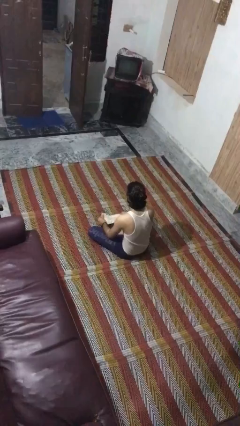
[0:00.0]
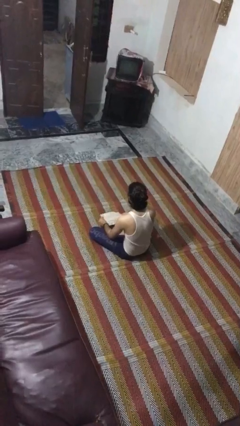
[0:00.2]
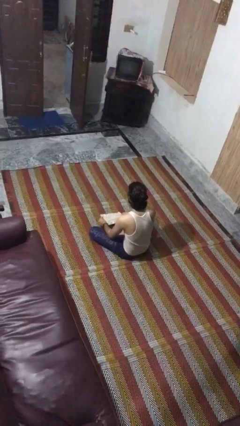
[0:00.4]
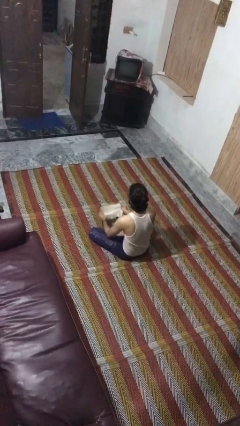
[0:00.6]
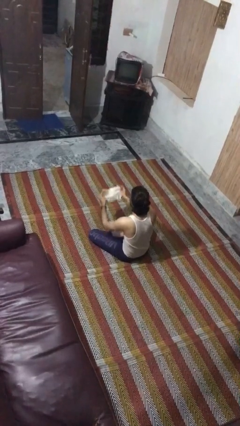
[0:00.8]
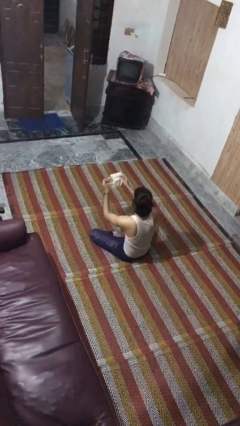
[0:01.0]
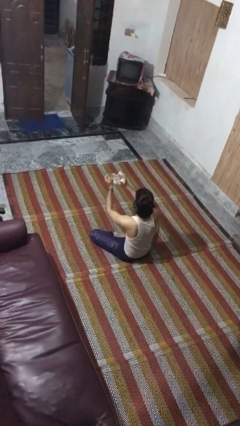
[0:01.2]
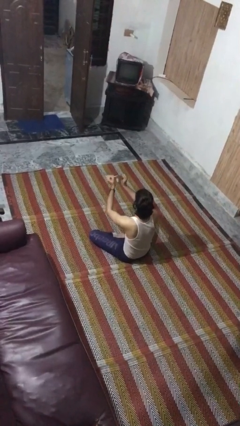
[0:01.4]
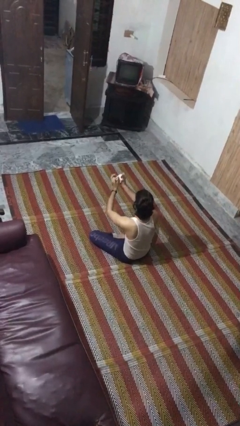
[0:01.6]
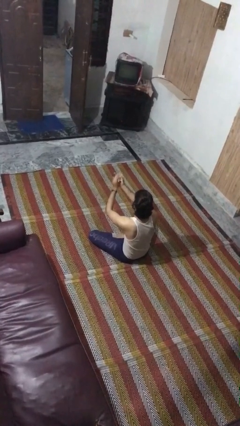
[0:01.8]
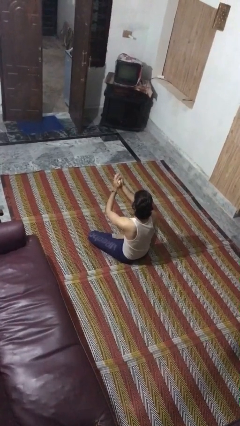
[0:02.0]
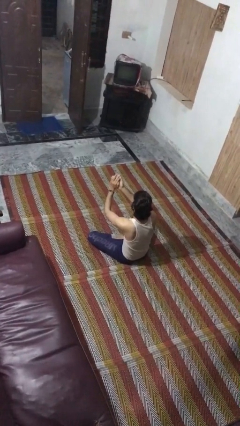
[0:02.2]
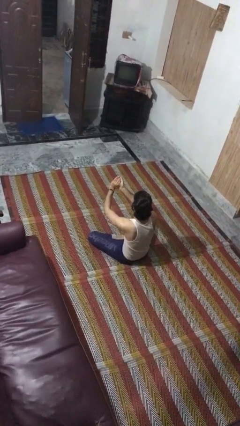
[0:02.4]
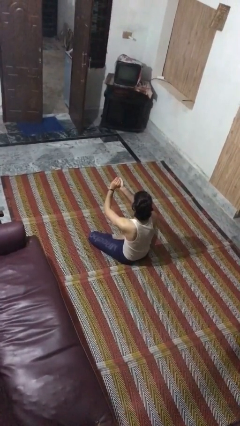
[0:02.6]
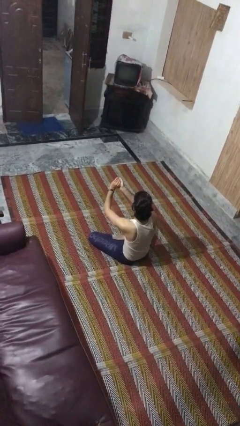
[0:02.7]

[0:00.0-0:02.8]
person crumples paper

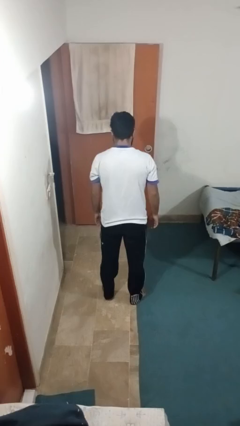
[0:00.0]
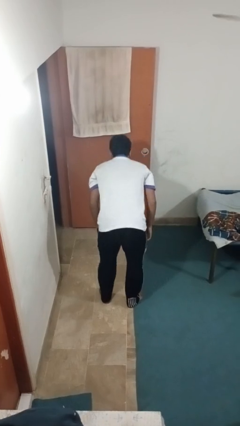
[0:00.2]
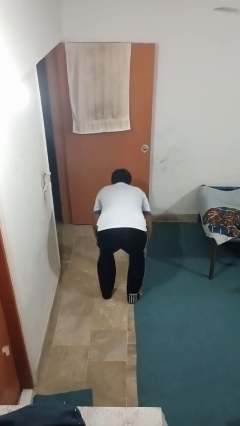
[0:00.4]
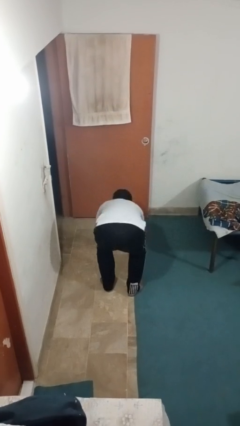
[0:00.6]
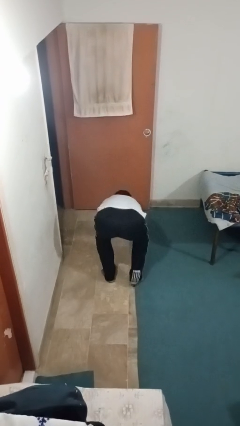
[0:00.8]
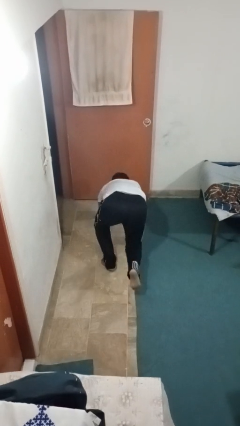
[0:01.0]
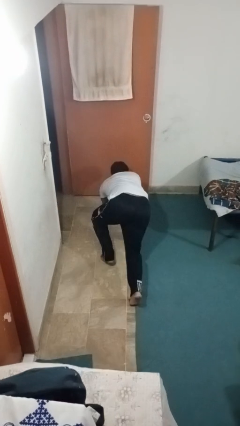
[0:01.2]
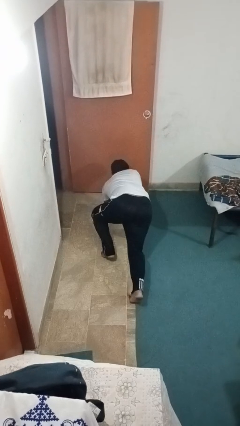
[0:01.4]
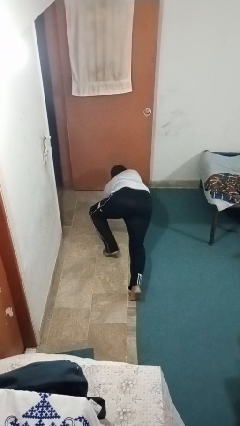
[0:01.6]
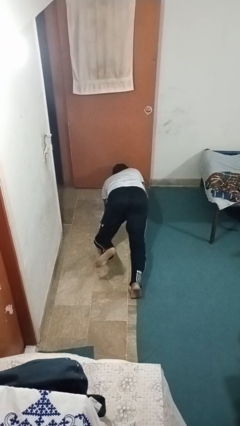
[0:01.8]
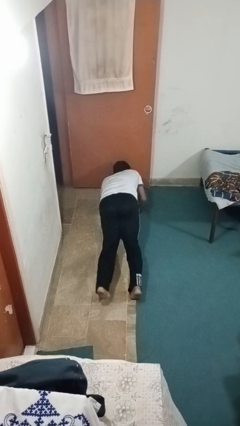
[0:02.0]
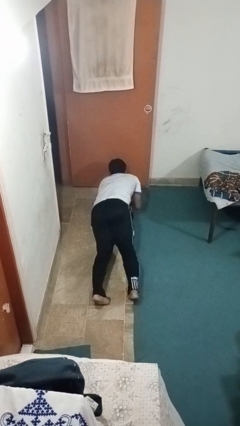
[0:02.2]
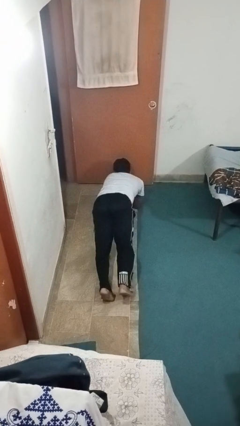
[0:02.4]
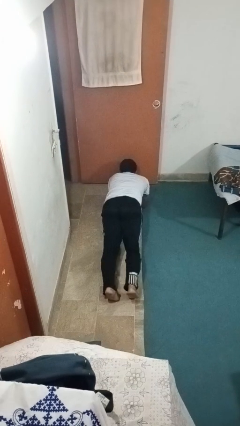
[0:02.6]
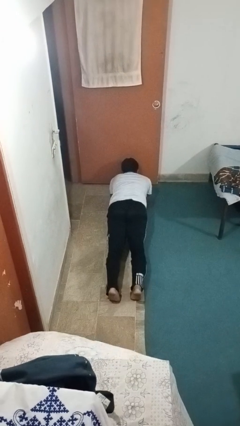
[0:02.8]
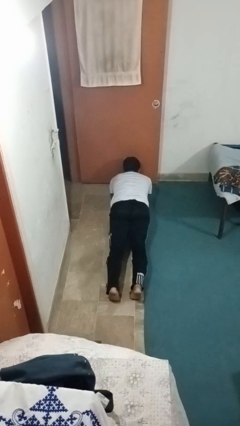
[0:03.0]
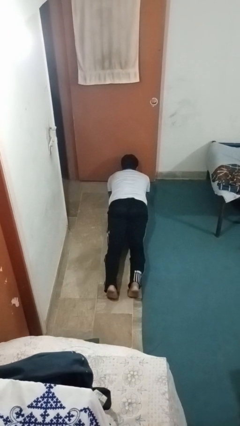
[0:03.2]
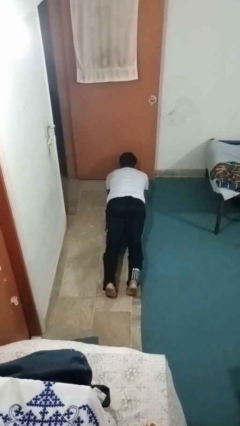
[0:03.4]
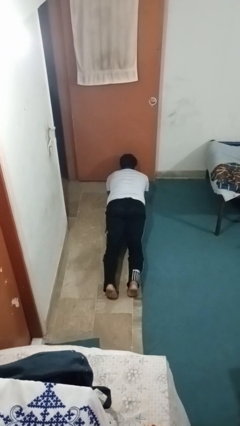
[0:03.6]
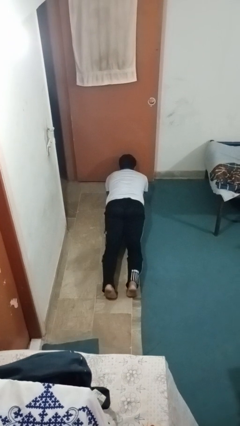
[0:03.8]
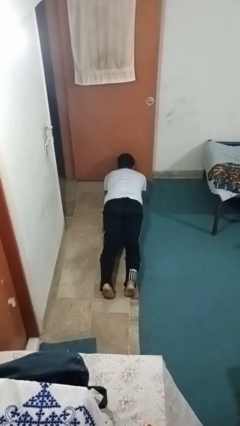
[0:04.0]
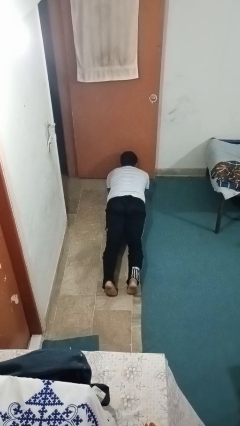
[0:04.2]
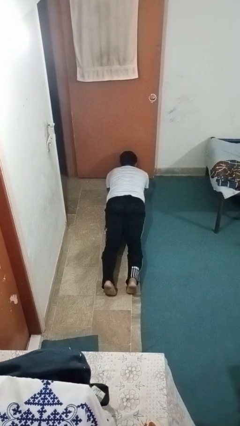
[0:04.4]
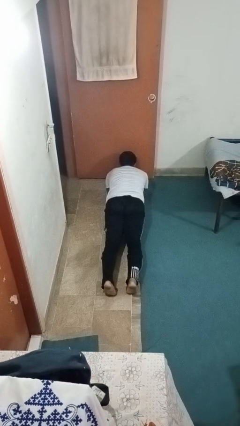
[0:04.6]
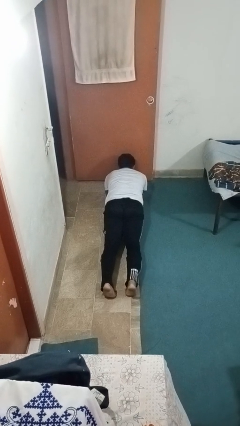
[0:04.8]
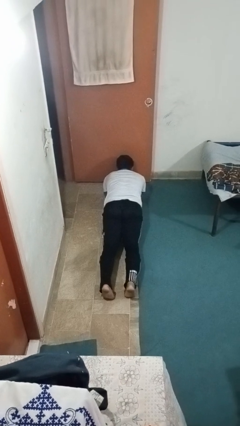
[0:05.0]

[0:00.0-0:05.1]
person exercises with plank

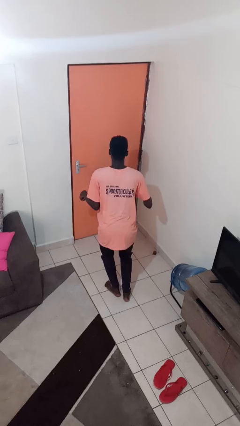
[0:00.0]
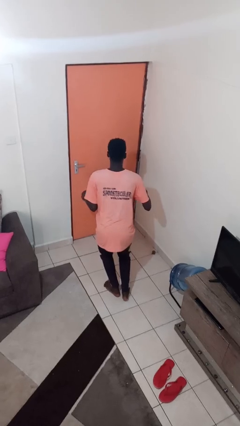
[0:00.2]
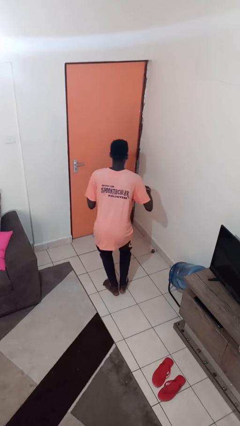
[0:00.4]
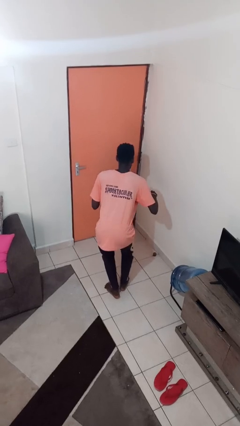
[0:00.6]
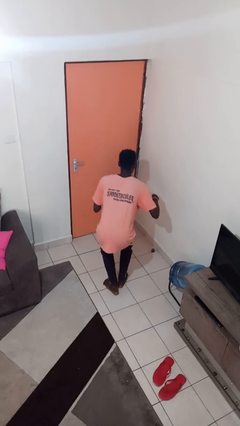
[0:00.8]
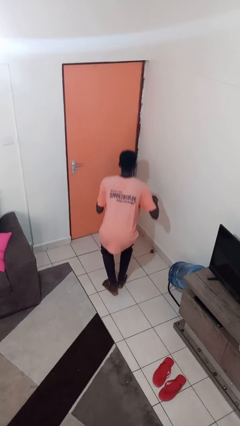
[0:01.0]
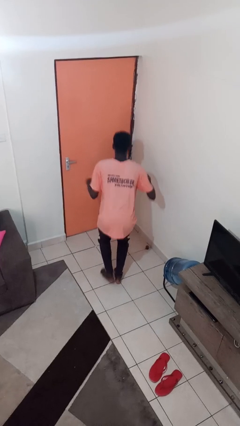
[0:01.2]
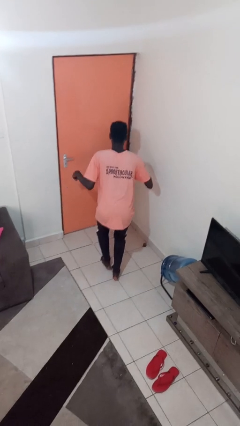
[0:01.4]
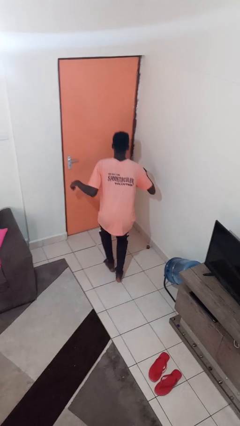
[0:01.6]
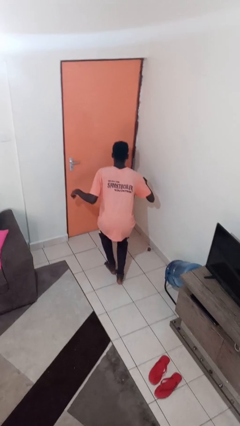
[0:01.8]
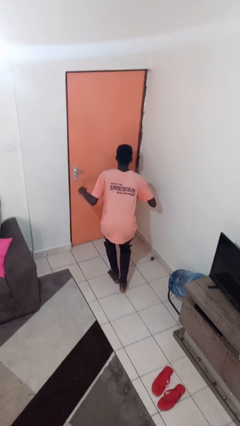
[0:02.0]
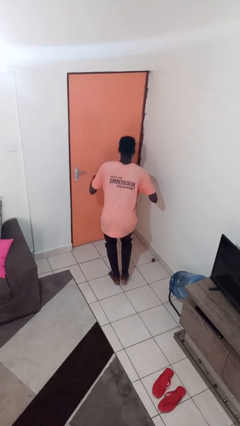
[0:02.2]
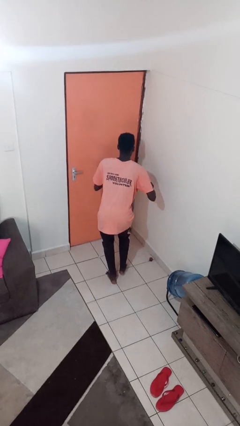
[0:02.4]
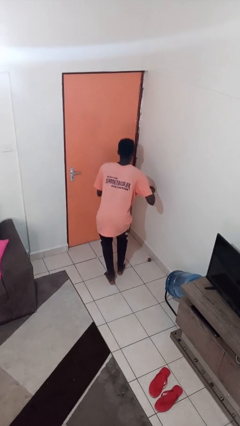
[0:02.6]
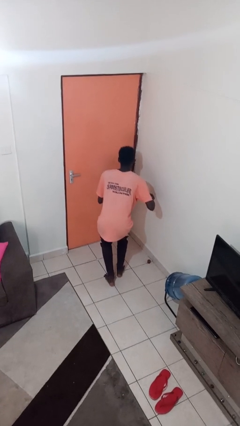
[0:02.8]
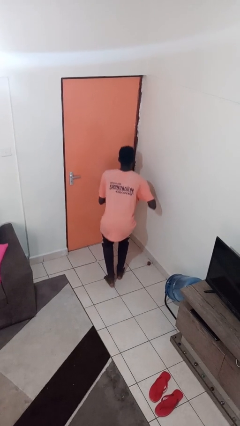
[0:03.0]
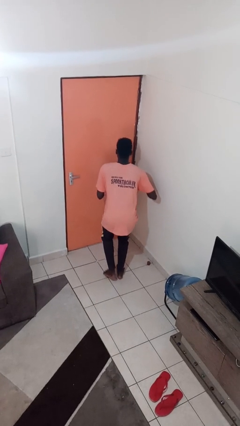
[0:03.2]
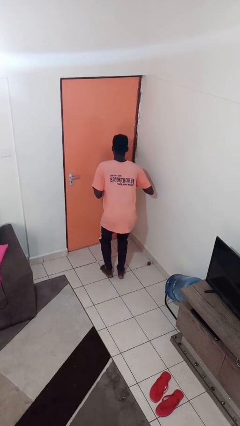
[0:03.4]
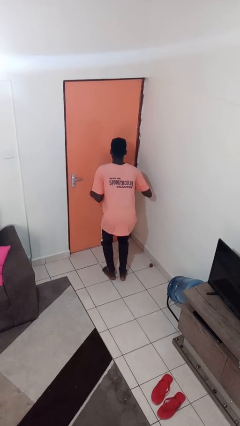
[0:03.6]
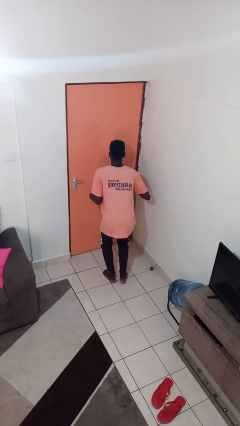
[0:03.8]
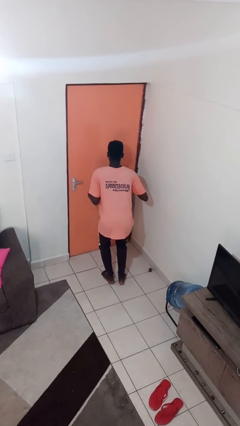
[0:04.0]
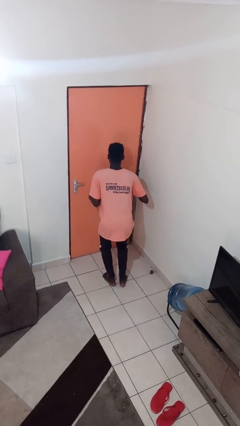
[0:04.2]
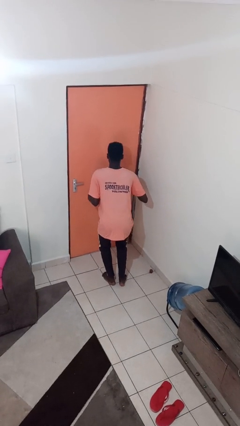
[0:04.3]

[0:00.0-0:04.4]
person walks tiptoe

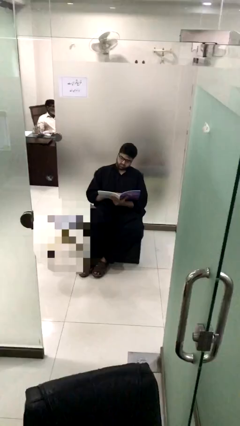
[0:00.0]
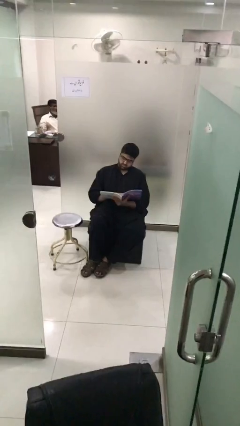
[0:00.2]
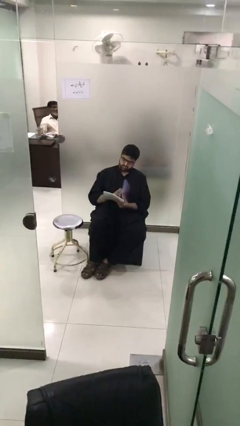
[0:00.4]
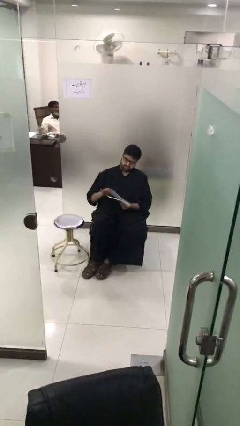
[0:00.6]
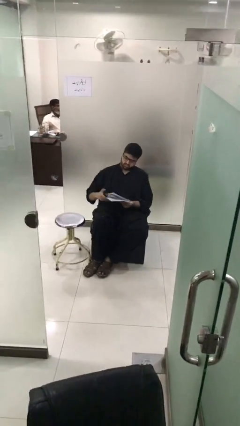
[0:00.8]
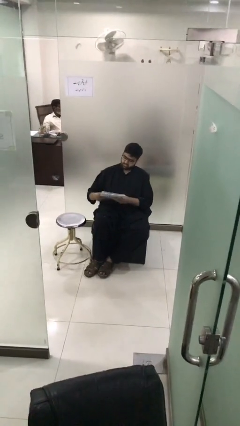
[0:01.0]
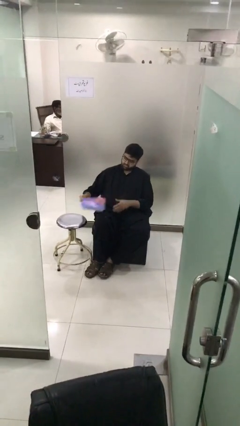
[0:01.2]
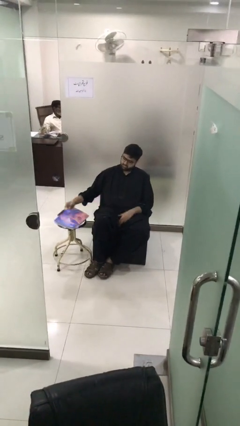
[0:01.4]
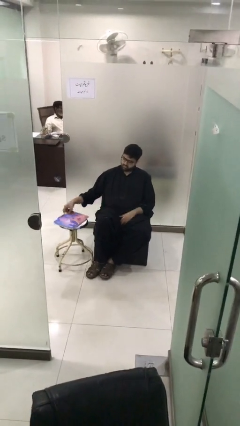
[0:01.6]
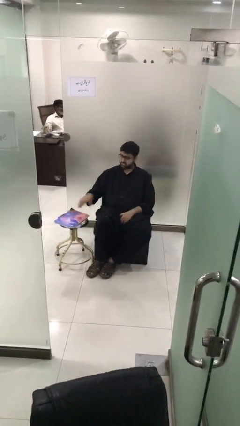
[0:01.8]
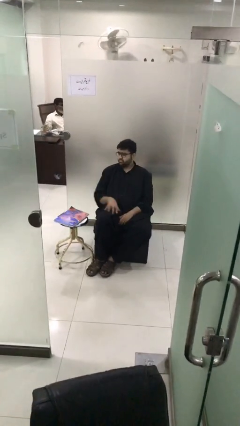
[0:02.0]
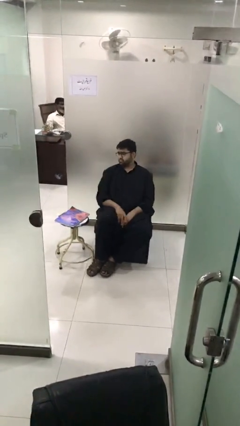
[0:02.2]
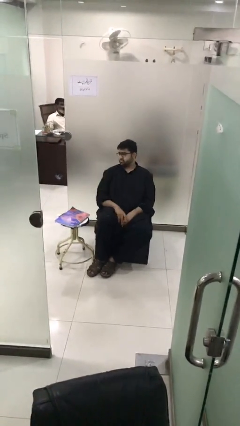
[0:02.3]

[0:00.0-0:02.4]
person puts down object on table

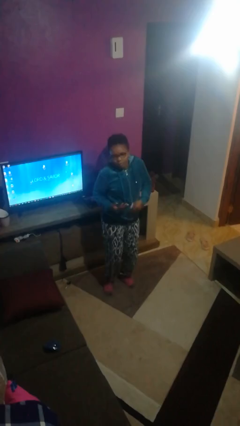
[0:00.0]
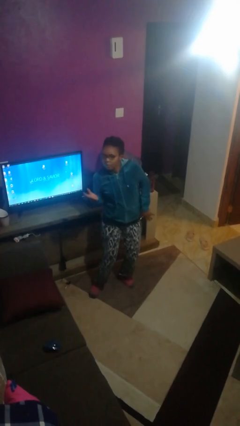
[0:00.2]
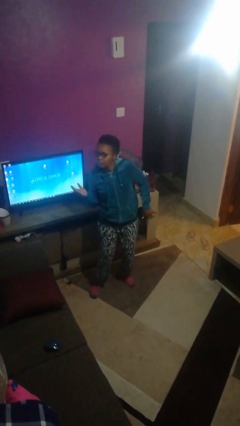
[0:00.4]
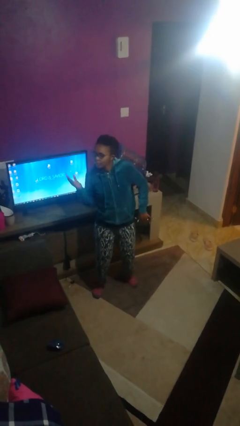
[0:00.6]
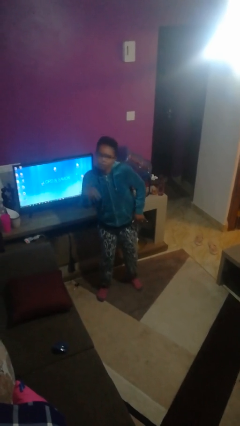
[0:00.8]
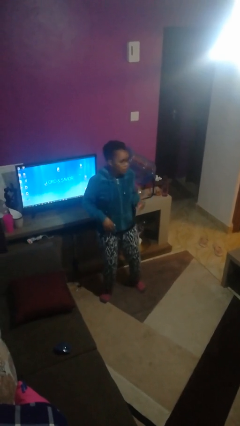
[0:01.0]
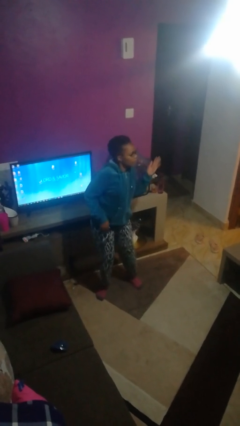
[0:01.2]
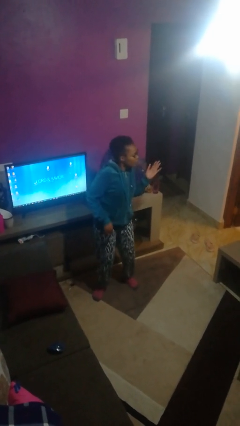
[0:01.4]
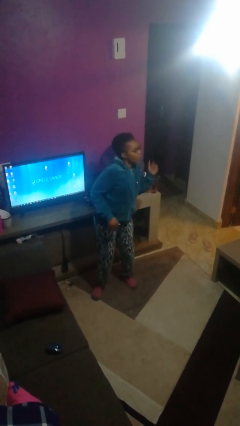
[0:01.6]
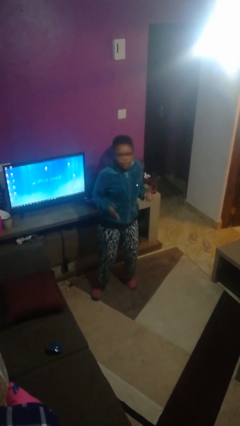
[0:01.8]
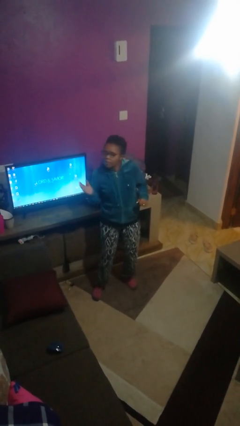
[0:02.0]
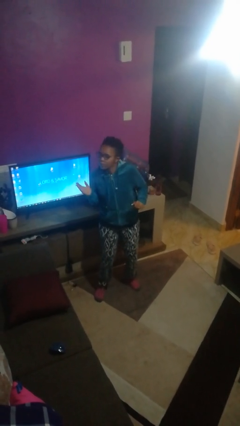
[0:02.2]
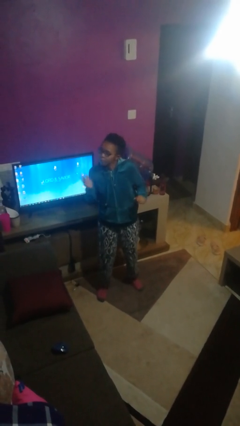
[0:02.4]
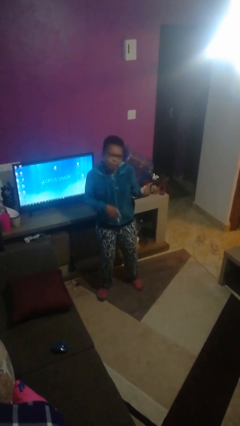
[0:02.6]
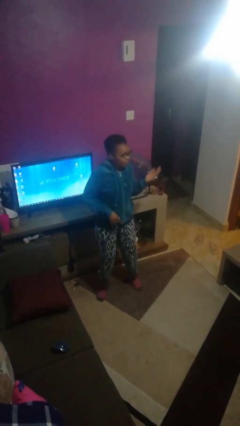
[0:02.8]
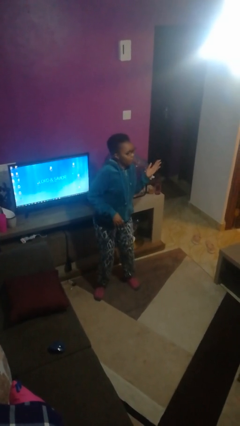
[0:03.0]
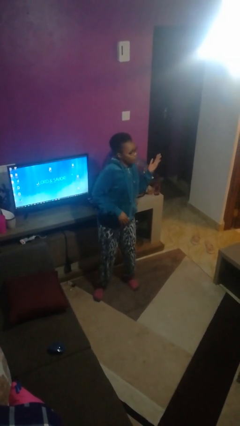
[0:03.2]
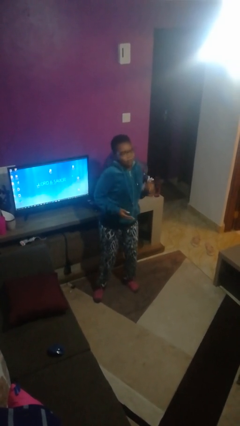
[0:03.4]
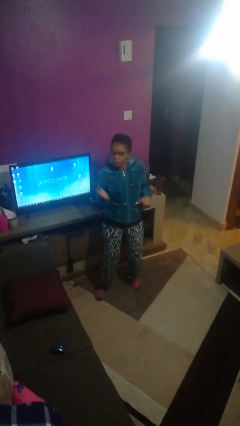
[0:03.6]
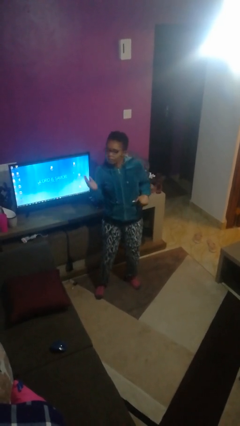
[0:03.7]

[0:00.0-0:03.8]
person dances in place
